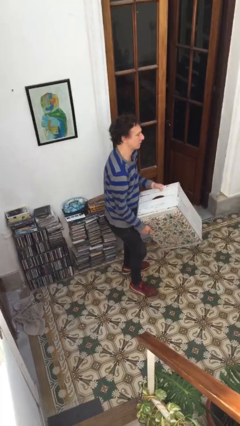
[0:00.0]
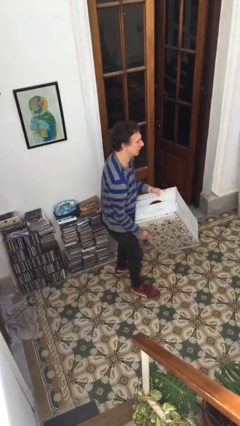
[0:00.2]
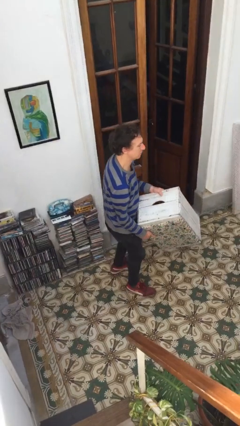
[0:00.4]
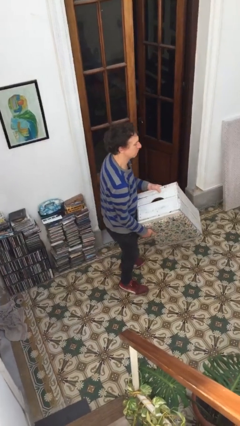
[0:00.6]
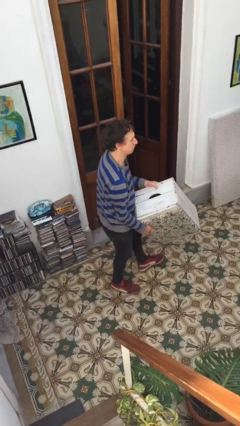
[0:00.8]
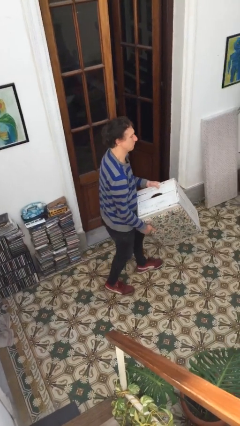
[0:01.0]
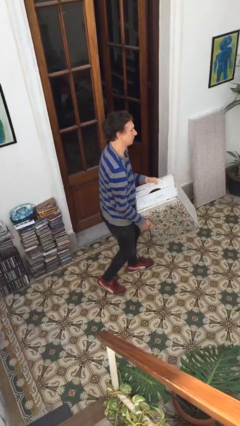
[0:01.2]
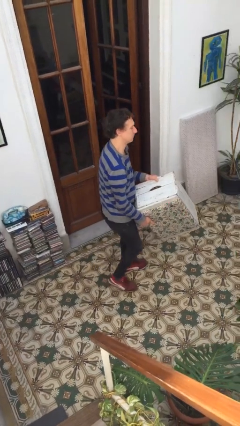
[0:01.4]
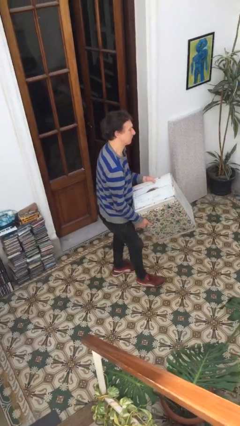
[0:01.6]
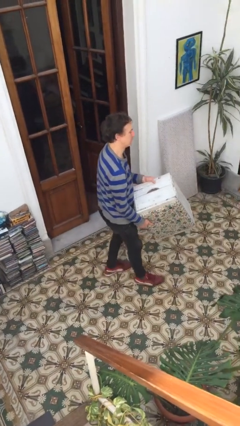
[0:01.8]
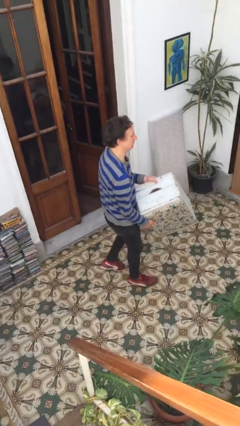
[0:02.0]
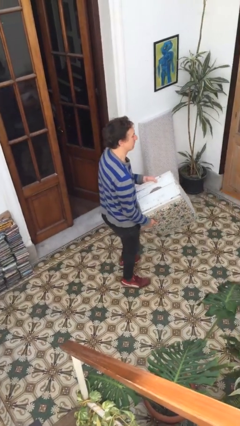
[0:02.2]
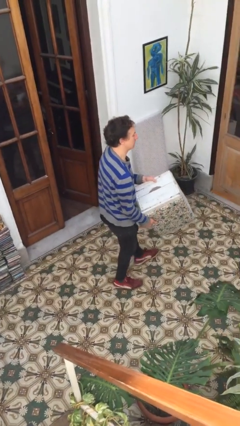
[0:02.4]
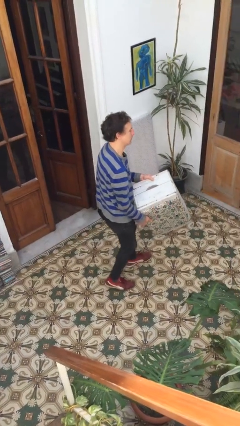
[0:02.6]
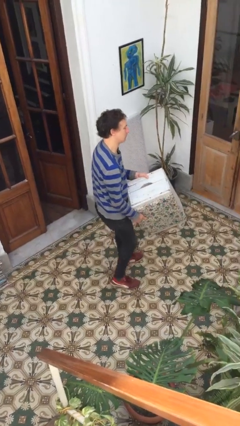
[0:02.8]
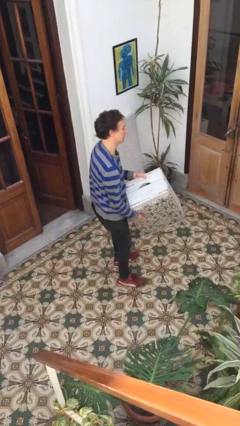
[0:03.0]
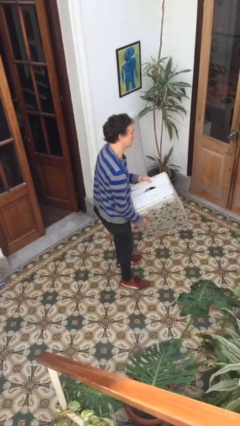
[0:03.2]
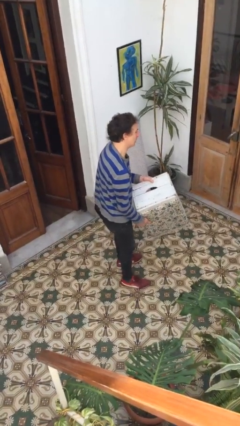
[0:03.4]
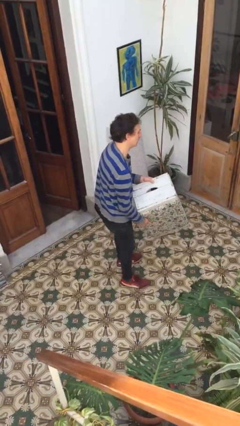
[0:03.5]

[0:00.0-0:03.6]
person carries heavy object

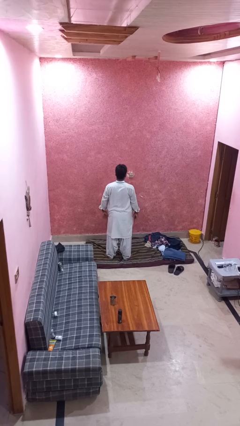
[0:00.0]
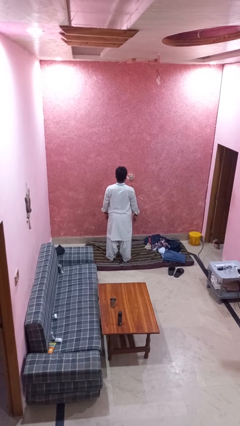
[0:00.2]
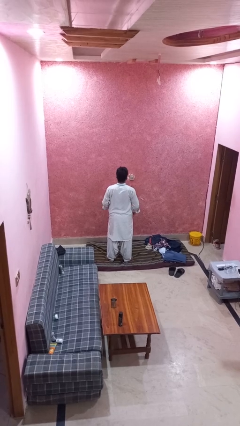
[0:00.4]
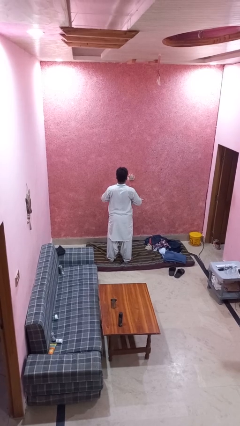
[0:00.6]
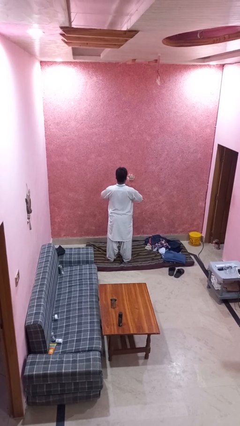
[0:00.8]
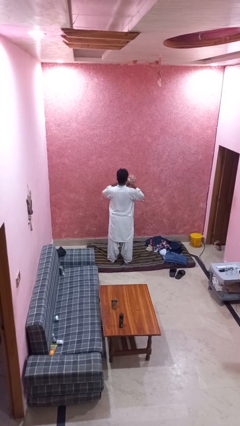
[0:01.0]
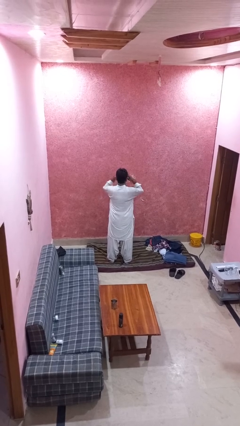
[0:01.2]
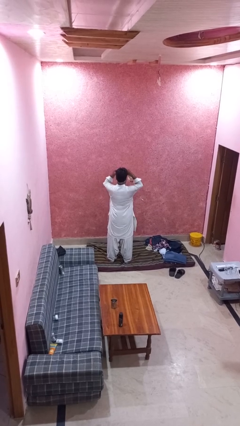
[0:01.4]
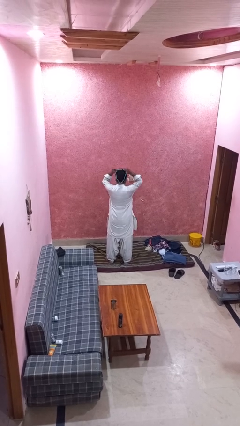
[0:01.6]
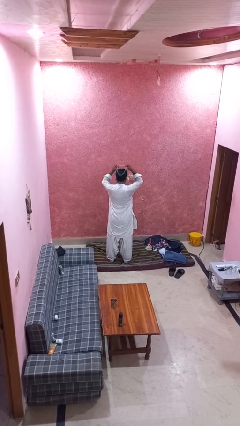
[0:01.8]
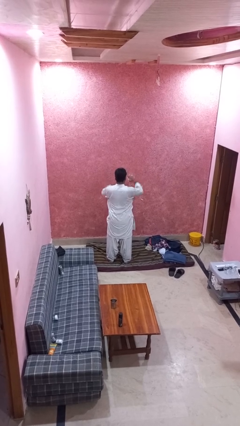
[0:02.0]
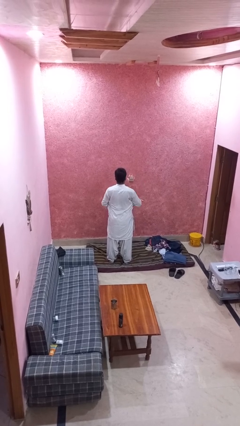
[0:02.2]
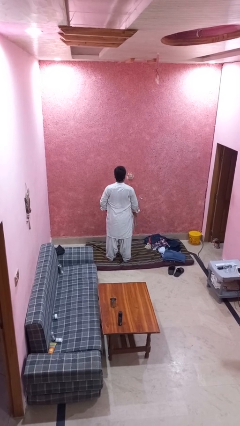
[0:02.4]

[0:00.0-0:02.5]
person takes off necklace

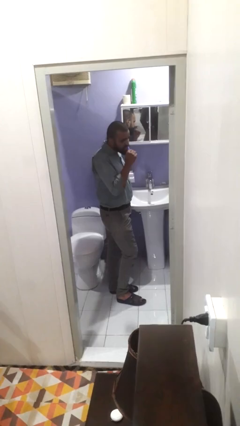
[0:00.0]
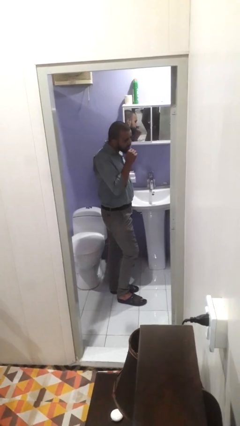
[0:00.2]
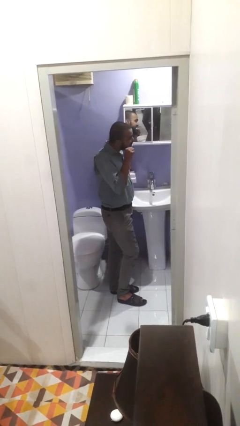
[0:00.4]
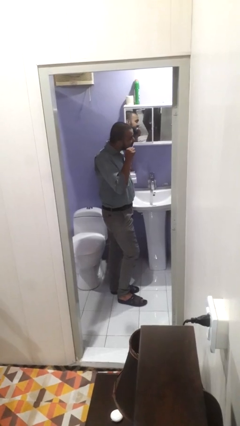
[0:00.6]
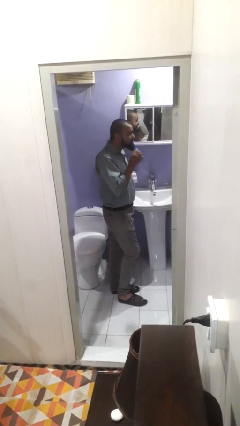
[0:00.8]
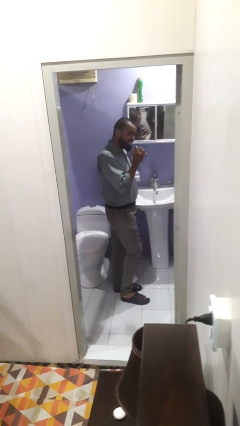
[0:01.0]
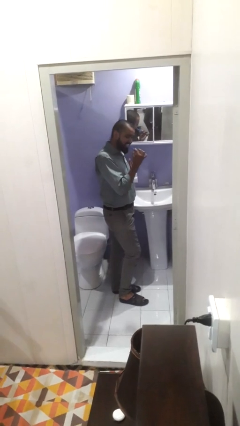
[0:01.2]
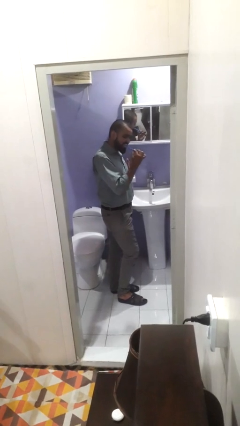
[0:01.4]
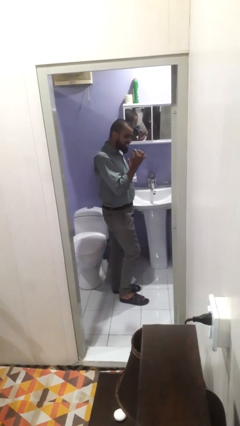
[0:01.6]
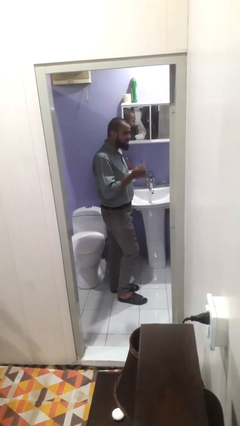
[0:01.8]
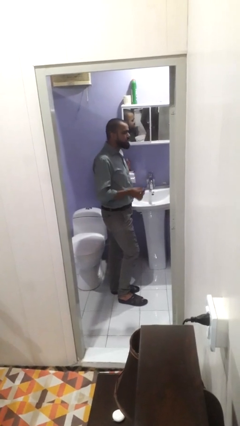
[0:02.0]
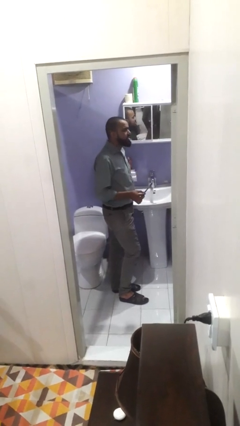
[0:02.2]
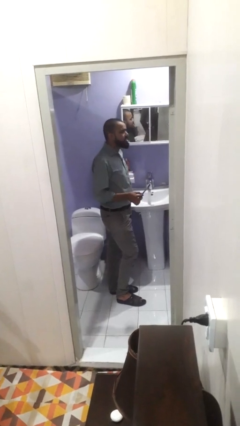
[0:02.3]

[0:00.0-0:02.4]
person brushes teeth

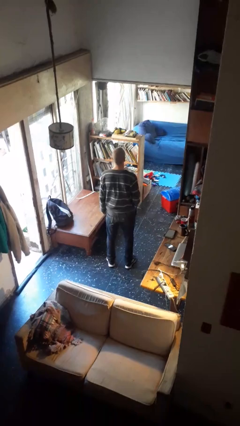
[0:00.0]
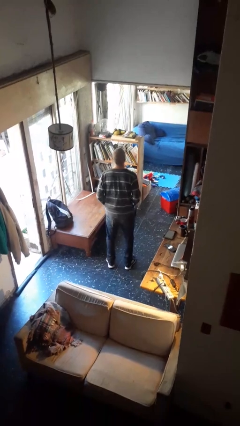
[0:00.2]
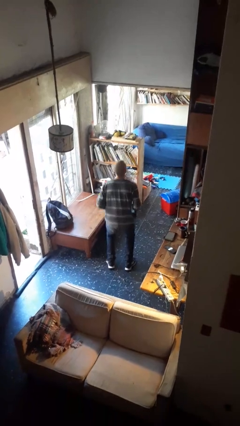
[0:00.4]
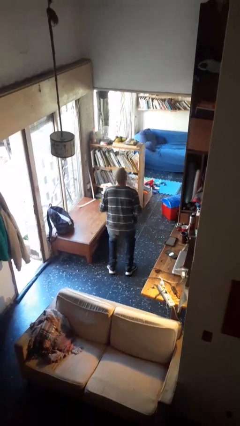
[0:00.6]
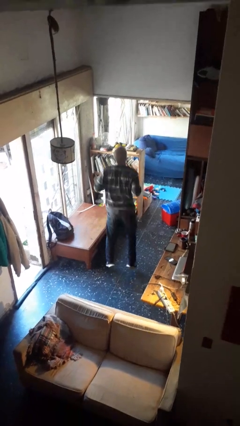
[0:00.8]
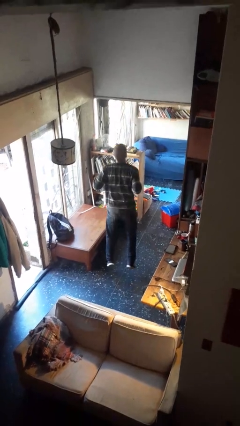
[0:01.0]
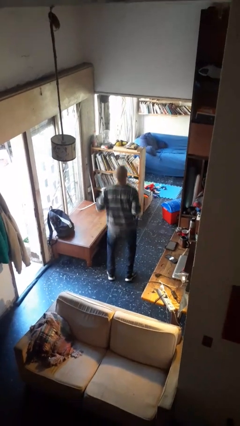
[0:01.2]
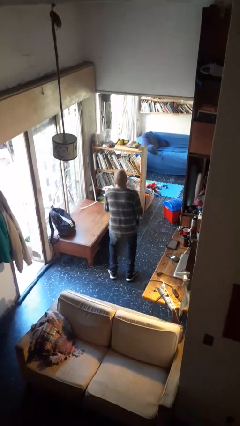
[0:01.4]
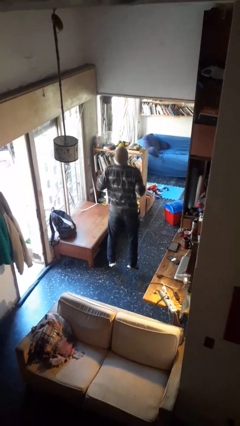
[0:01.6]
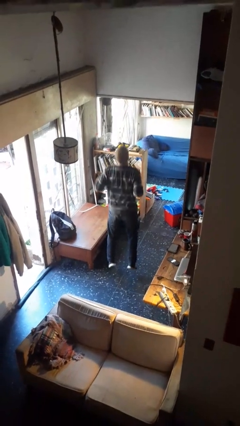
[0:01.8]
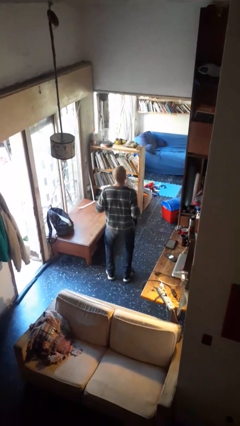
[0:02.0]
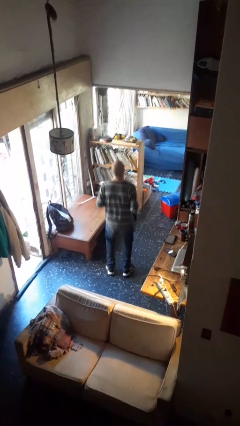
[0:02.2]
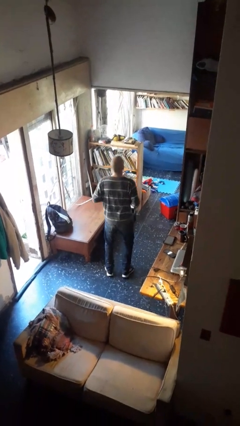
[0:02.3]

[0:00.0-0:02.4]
person jumps

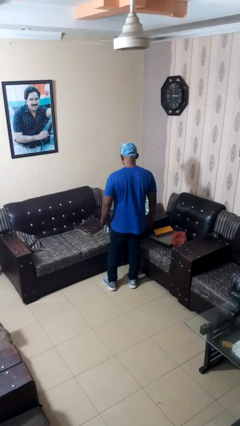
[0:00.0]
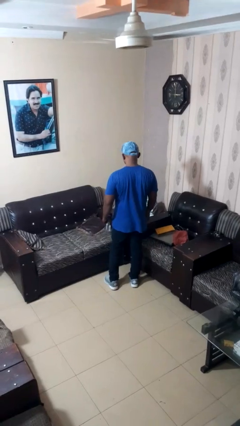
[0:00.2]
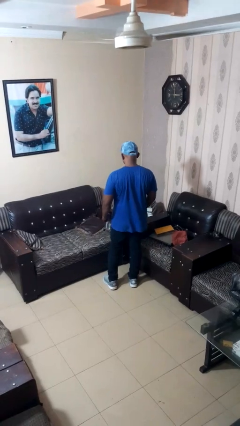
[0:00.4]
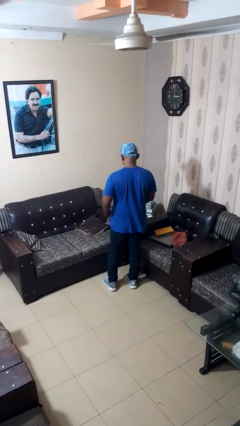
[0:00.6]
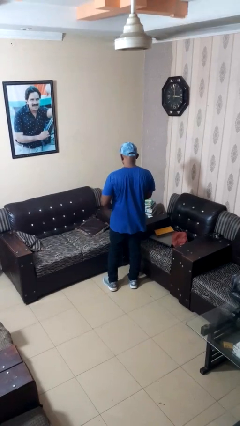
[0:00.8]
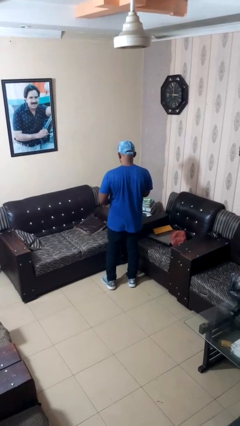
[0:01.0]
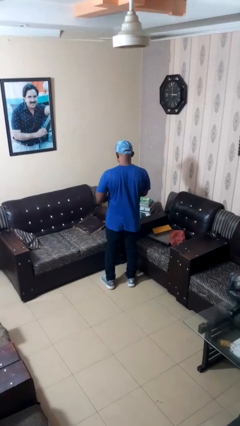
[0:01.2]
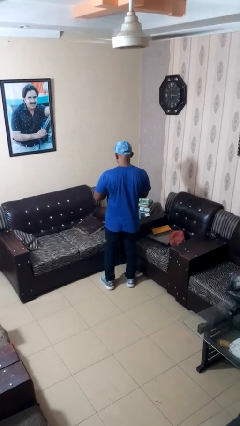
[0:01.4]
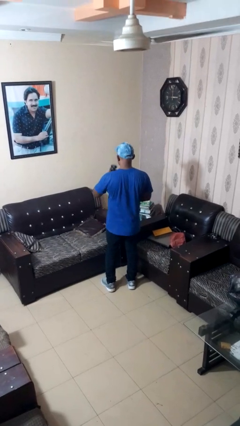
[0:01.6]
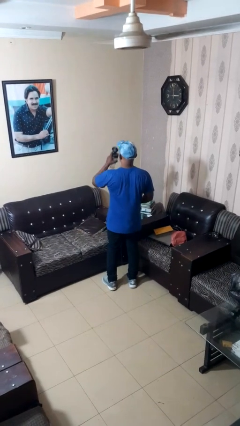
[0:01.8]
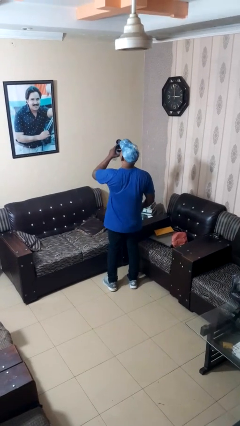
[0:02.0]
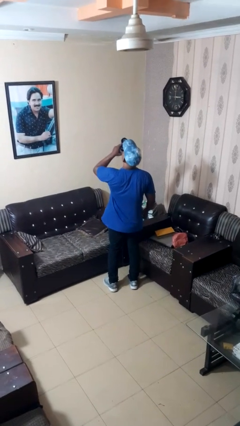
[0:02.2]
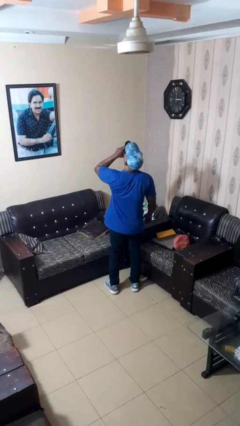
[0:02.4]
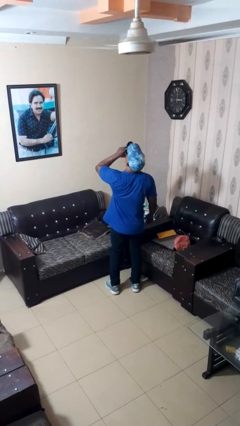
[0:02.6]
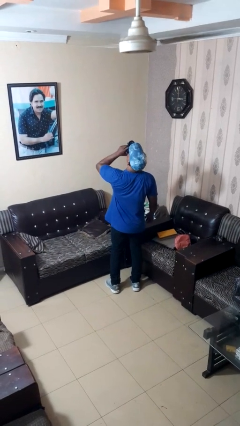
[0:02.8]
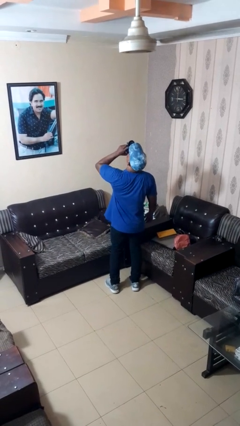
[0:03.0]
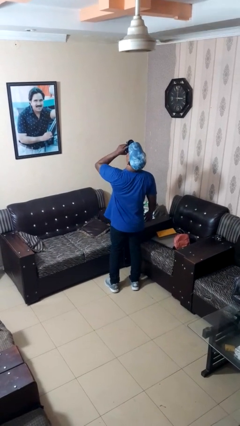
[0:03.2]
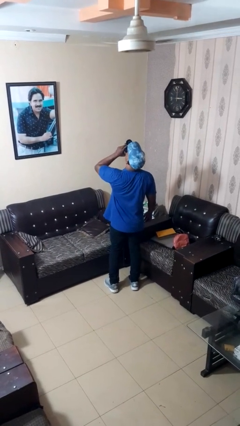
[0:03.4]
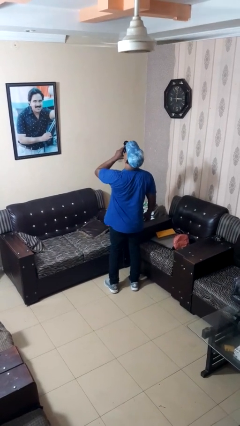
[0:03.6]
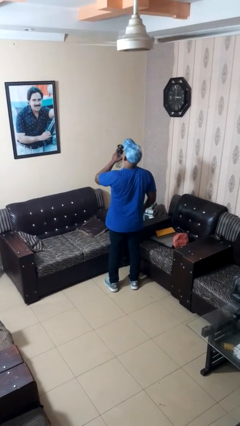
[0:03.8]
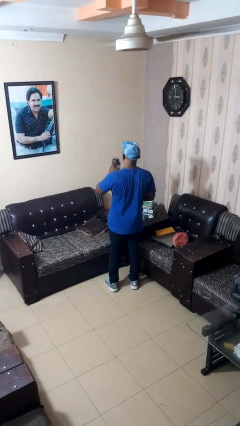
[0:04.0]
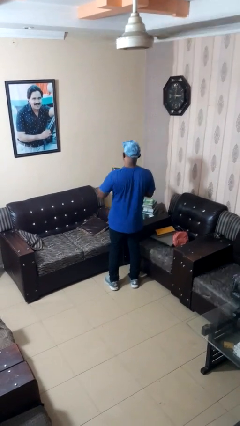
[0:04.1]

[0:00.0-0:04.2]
person drinks from bottle

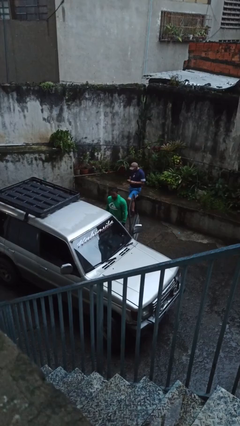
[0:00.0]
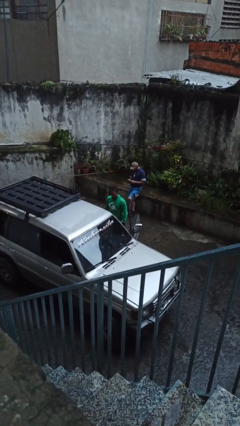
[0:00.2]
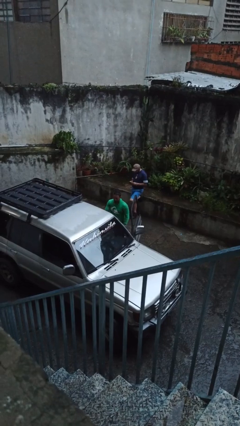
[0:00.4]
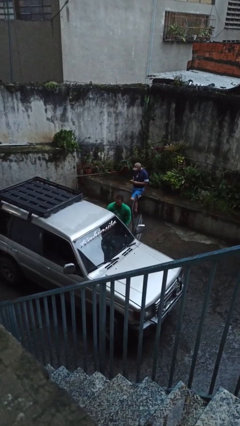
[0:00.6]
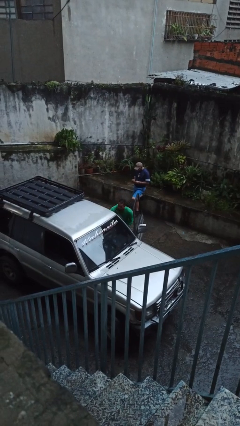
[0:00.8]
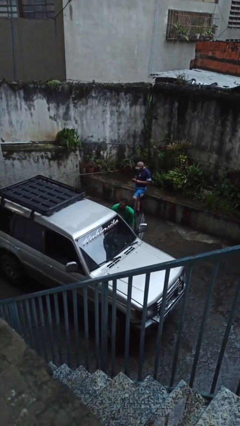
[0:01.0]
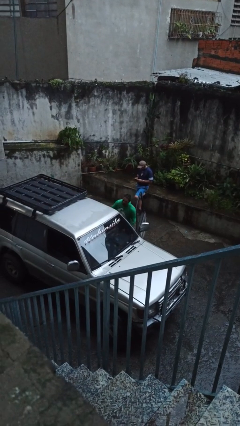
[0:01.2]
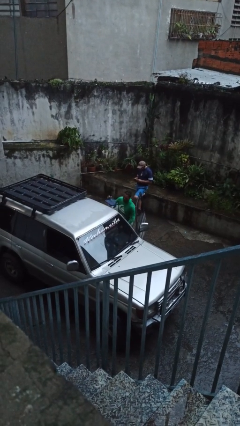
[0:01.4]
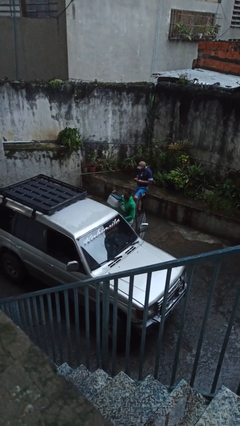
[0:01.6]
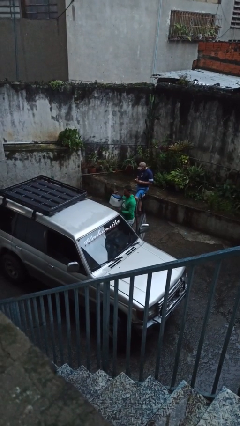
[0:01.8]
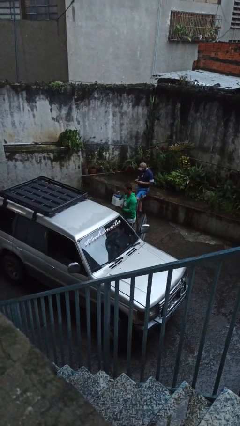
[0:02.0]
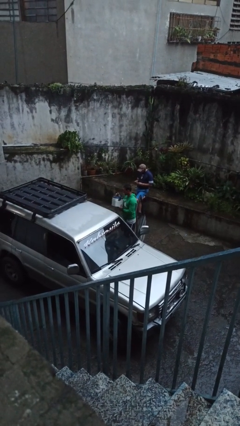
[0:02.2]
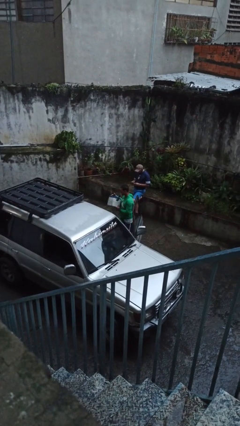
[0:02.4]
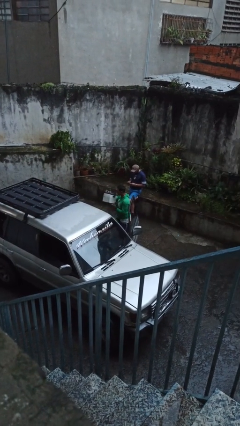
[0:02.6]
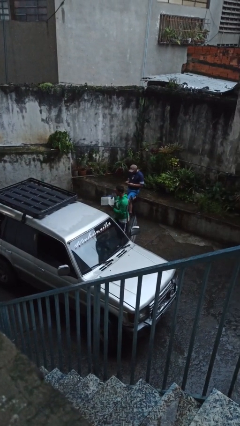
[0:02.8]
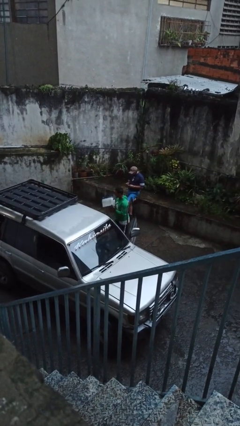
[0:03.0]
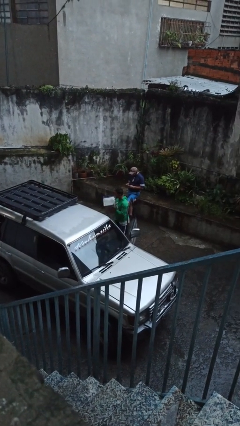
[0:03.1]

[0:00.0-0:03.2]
person unloads car
